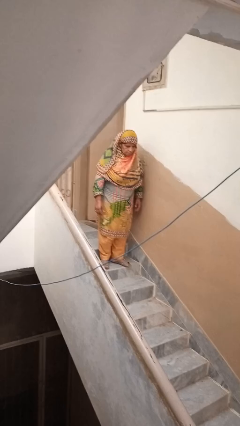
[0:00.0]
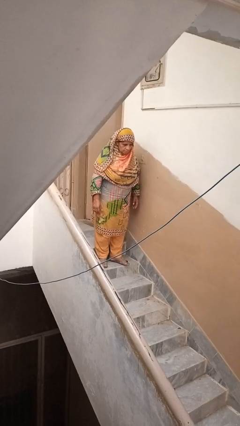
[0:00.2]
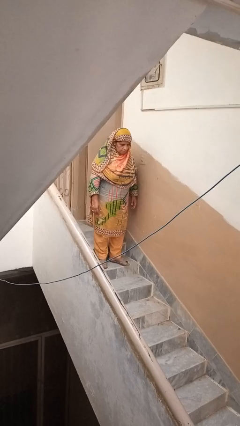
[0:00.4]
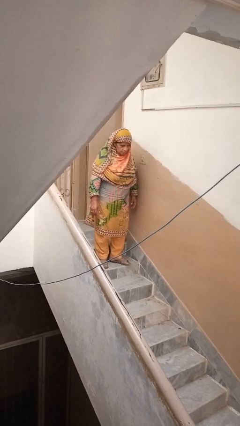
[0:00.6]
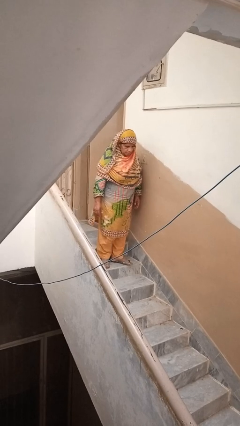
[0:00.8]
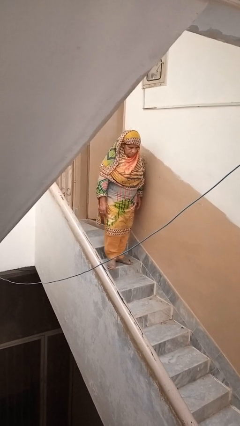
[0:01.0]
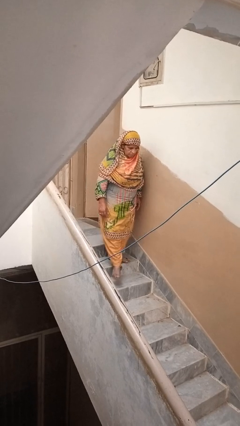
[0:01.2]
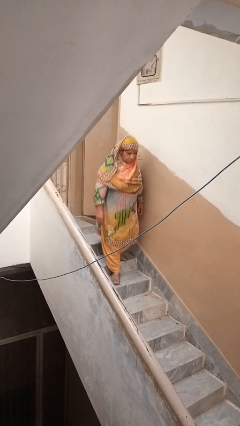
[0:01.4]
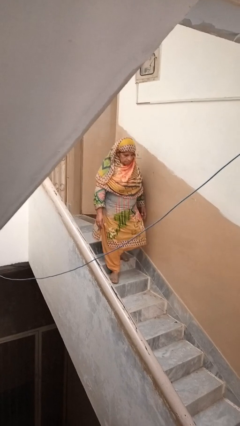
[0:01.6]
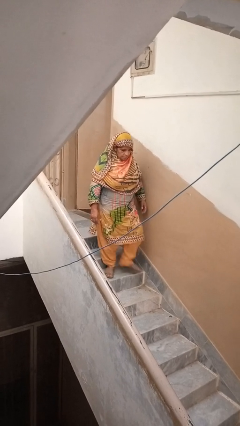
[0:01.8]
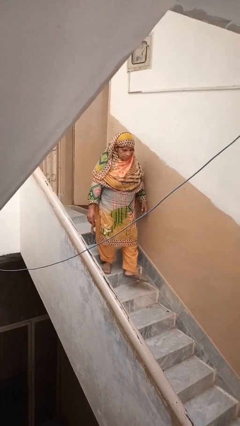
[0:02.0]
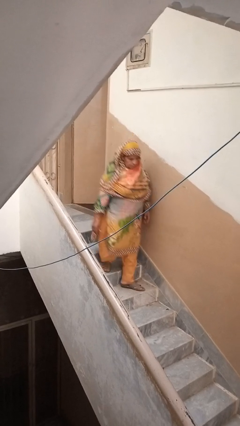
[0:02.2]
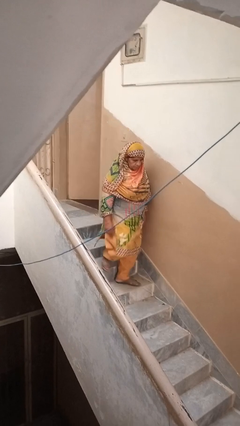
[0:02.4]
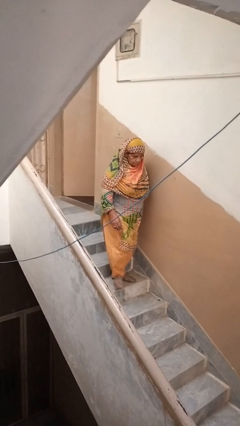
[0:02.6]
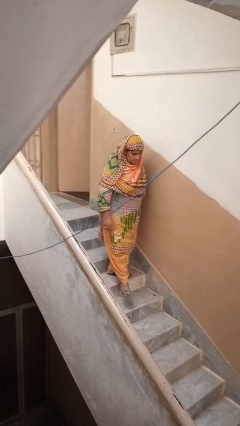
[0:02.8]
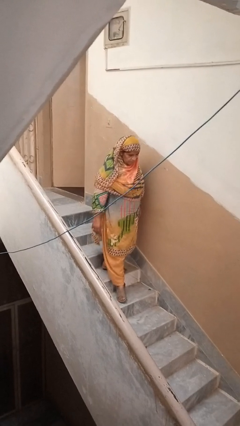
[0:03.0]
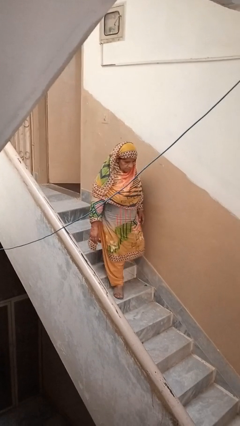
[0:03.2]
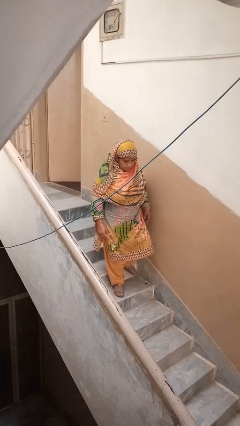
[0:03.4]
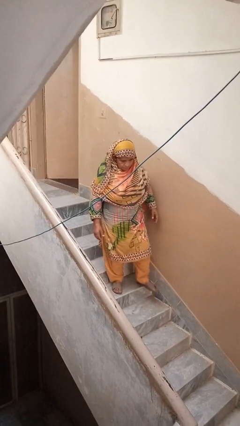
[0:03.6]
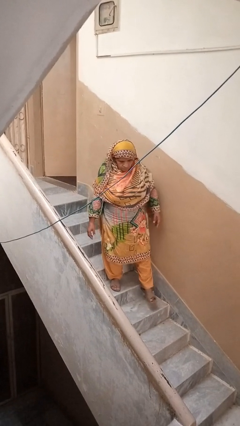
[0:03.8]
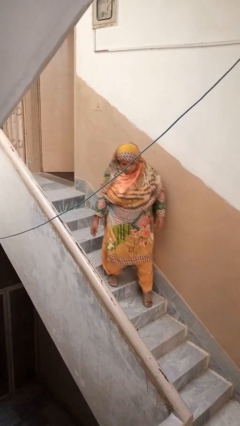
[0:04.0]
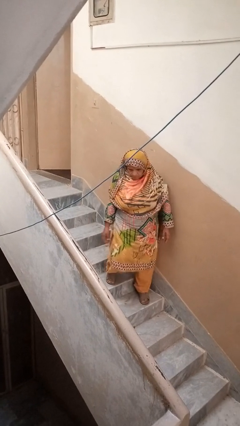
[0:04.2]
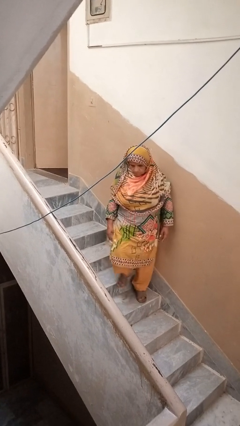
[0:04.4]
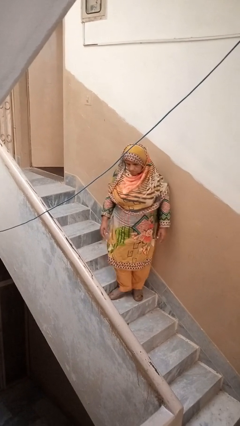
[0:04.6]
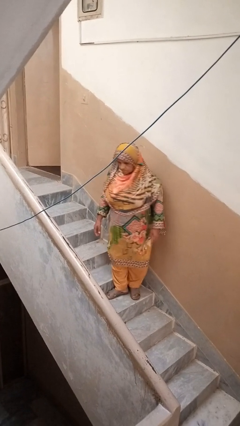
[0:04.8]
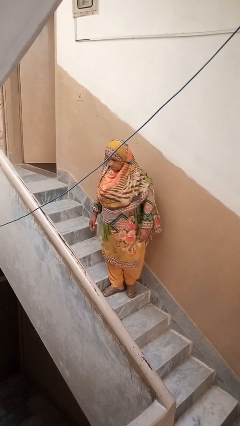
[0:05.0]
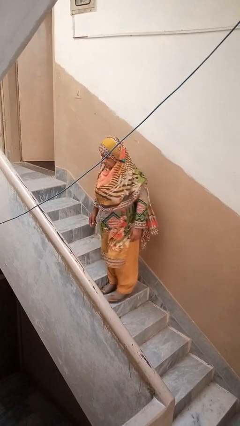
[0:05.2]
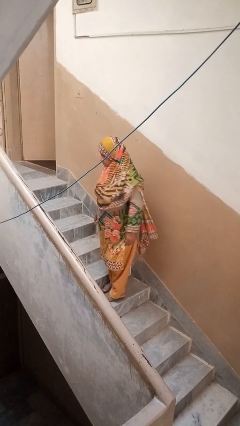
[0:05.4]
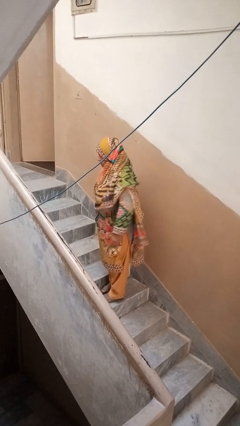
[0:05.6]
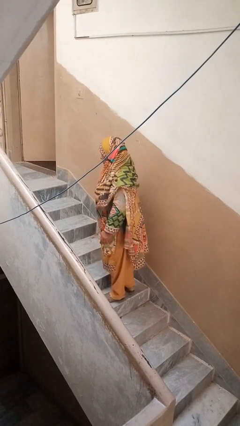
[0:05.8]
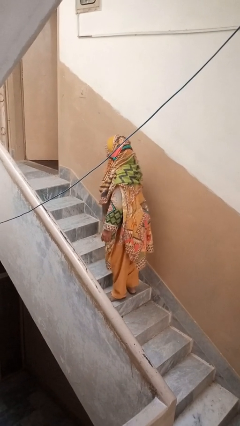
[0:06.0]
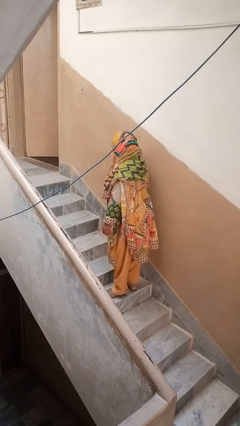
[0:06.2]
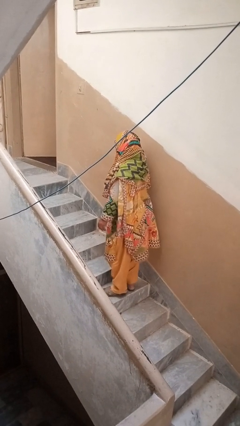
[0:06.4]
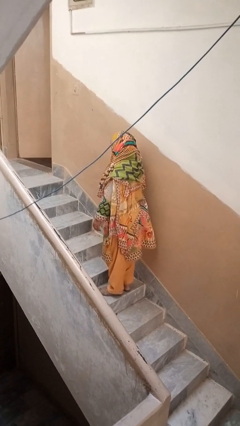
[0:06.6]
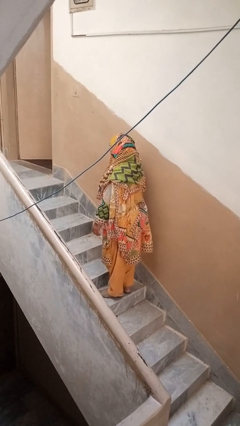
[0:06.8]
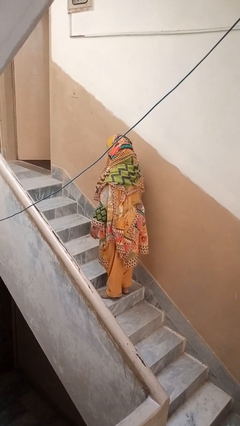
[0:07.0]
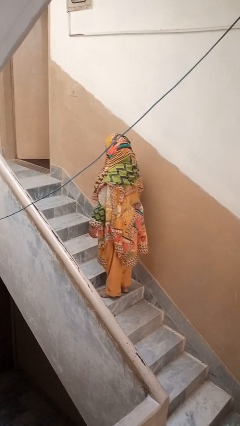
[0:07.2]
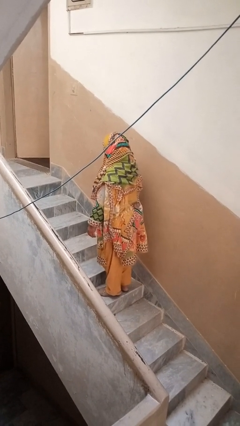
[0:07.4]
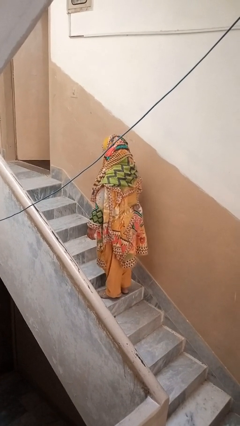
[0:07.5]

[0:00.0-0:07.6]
person climbs down stairs

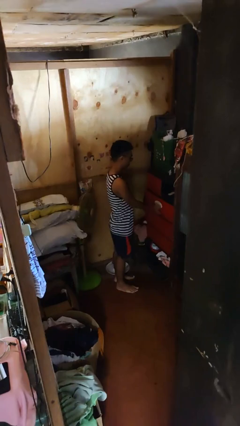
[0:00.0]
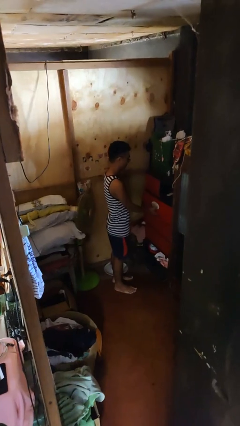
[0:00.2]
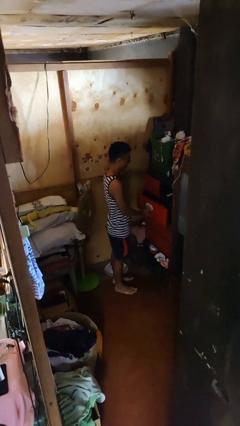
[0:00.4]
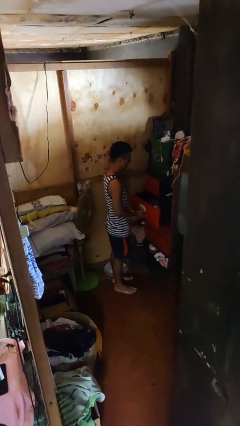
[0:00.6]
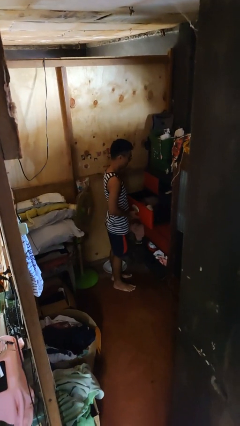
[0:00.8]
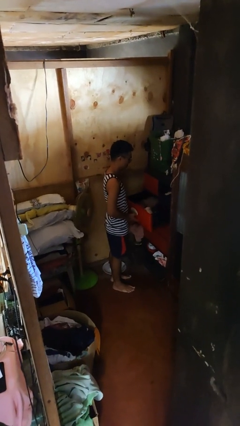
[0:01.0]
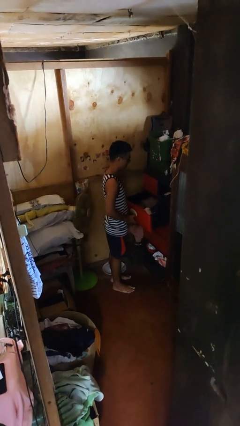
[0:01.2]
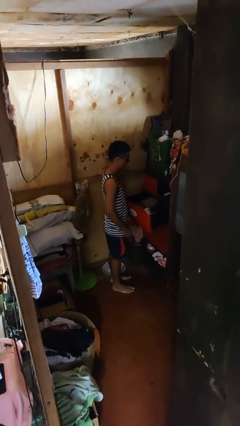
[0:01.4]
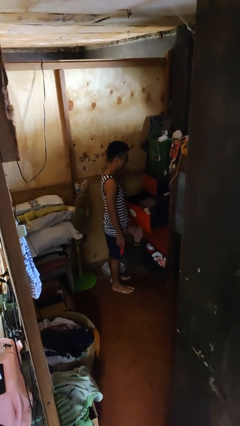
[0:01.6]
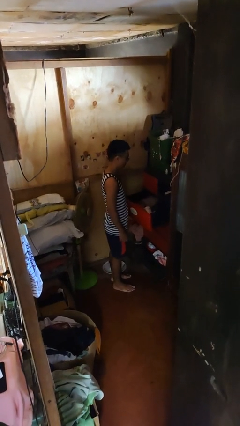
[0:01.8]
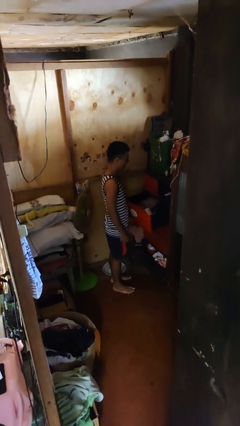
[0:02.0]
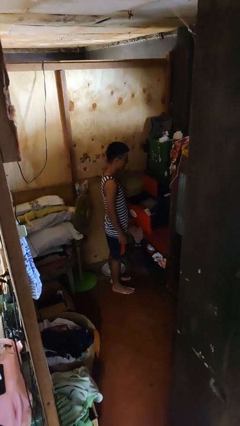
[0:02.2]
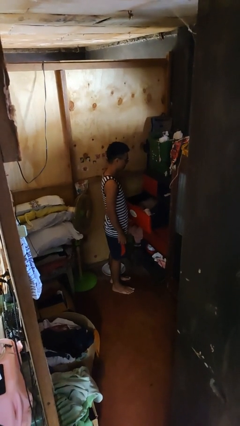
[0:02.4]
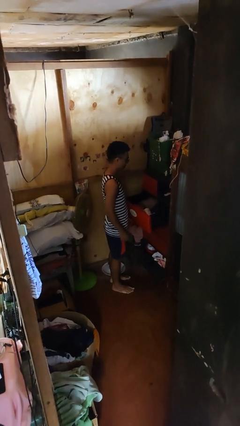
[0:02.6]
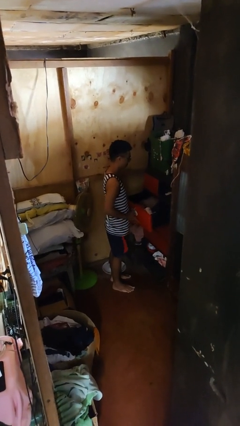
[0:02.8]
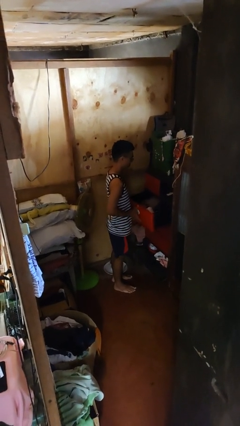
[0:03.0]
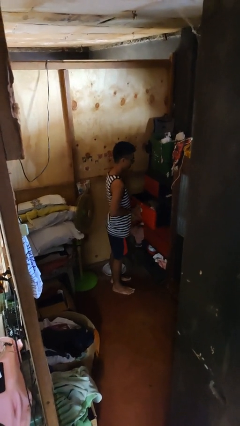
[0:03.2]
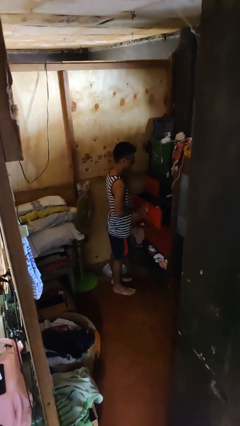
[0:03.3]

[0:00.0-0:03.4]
person opens dresser drawer

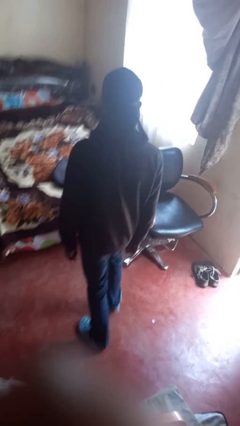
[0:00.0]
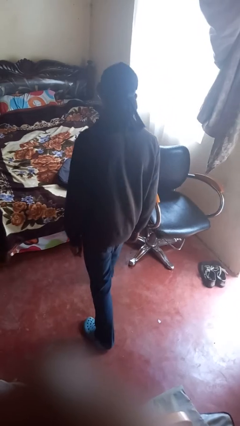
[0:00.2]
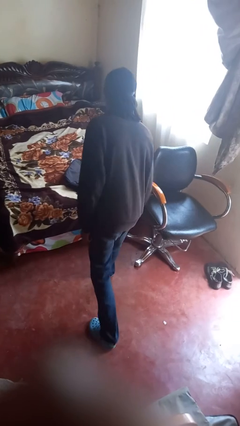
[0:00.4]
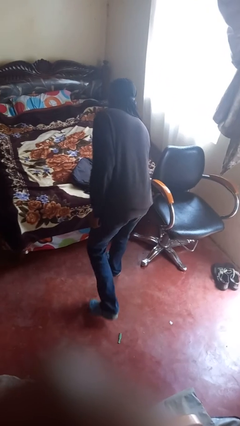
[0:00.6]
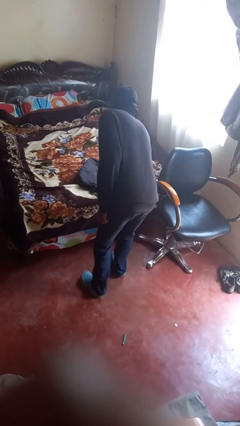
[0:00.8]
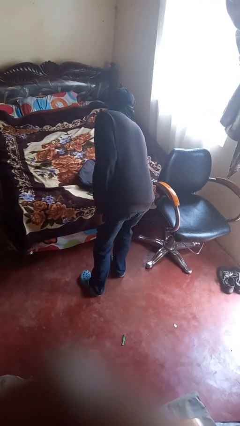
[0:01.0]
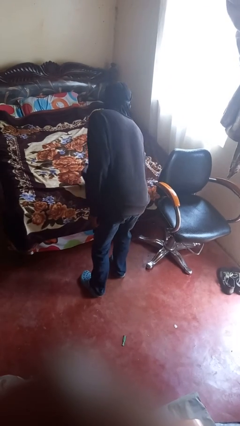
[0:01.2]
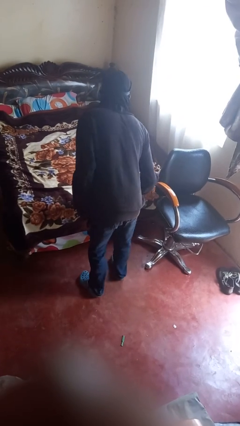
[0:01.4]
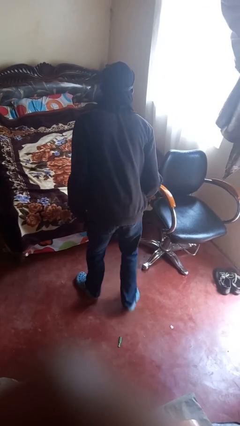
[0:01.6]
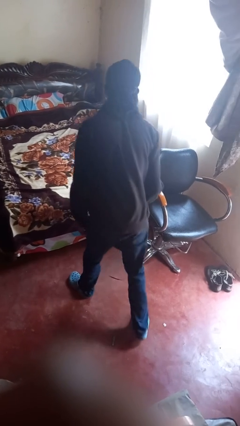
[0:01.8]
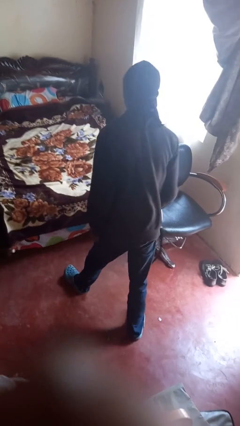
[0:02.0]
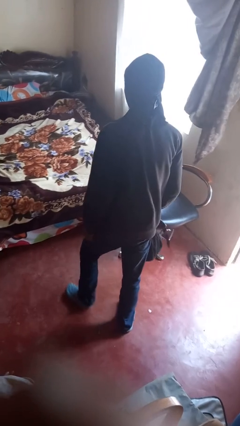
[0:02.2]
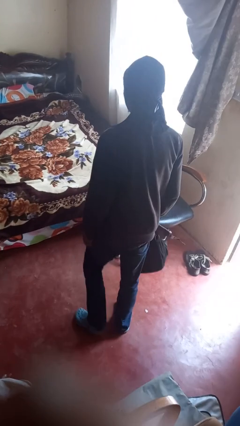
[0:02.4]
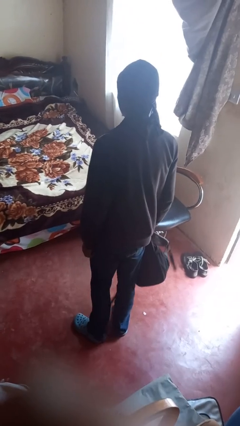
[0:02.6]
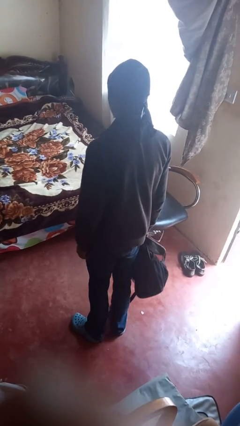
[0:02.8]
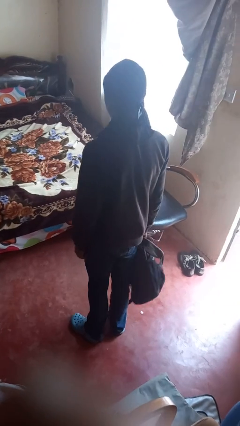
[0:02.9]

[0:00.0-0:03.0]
person picks up object from bed

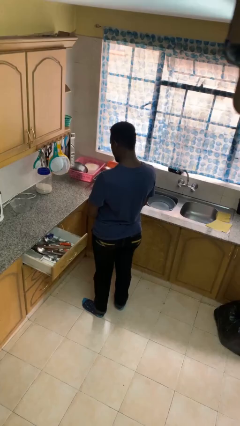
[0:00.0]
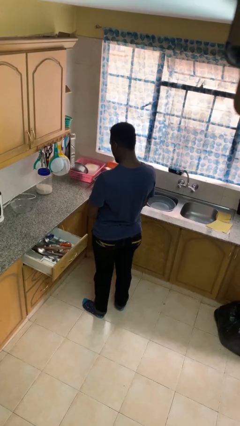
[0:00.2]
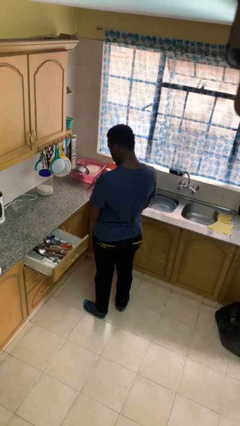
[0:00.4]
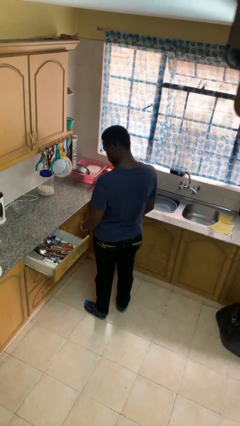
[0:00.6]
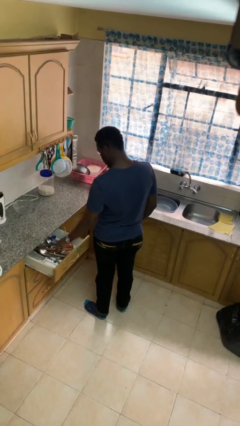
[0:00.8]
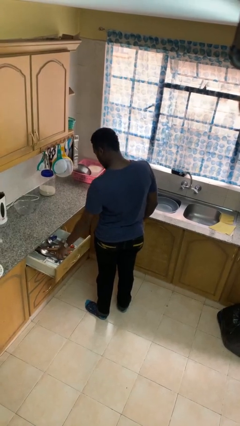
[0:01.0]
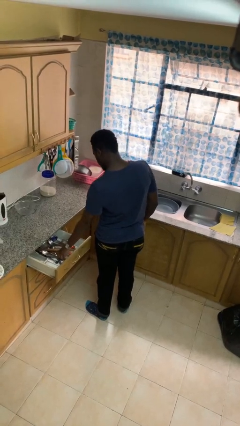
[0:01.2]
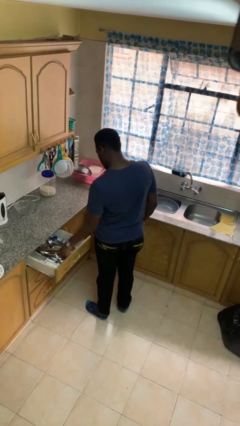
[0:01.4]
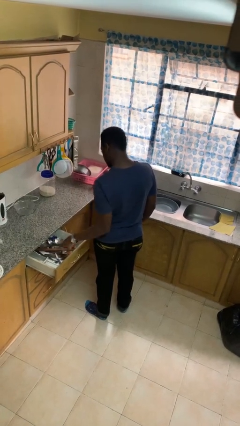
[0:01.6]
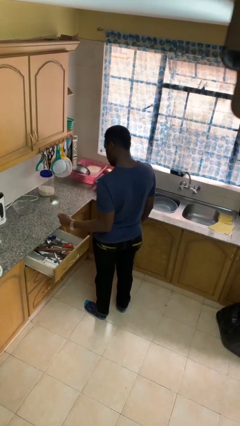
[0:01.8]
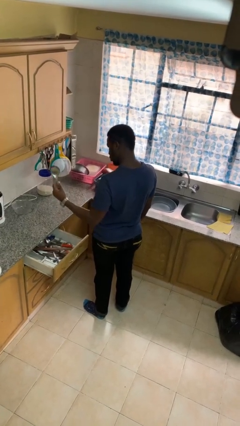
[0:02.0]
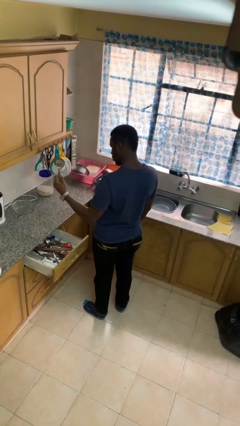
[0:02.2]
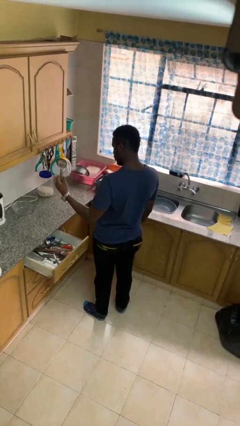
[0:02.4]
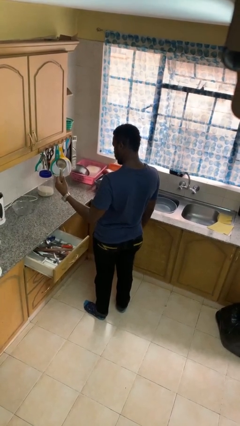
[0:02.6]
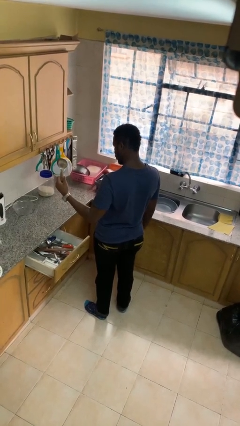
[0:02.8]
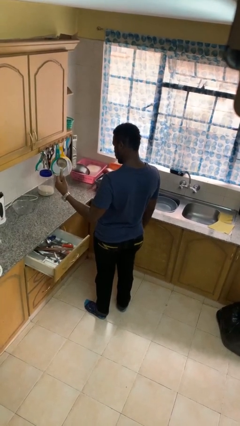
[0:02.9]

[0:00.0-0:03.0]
person takes object from kitchen drawer

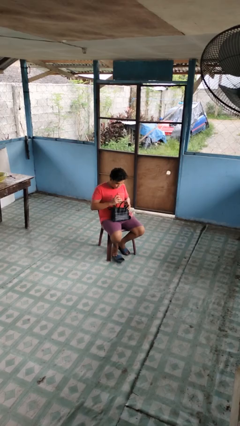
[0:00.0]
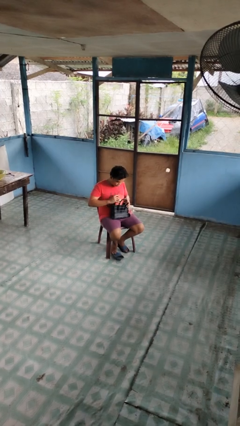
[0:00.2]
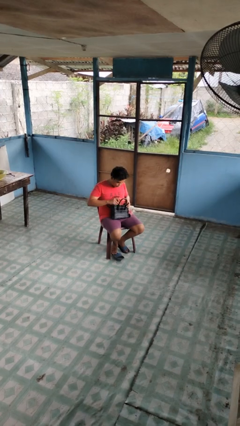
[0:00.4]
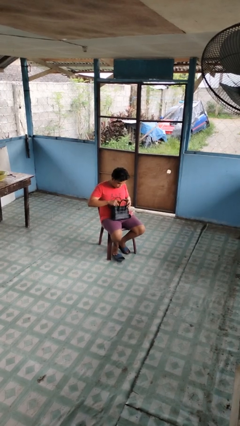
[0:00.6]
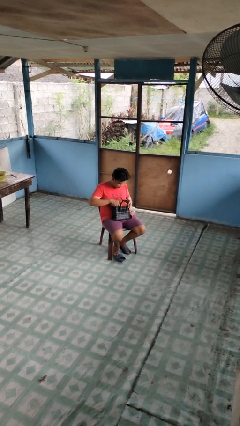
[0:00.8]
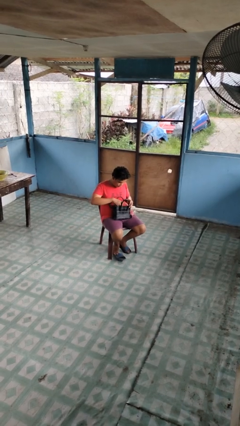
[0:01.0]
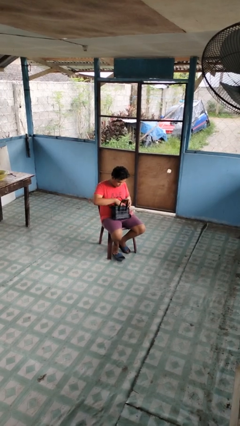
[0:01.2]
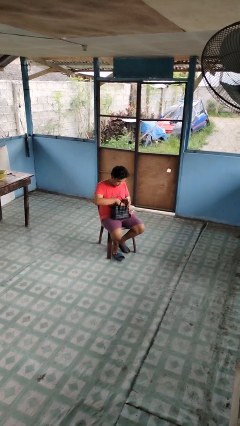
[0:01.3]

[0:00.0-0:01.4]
person puts object into purse
